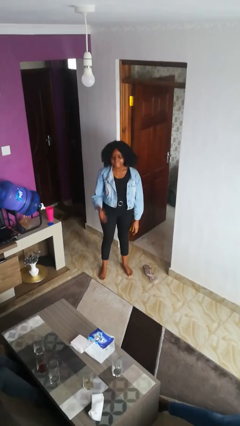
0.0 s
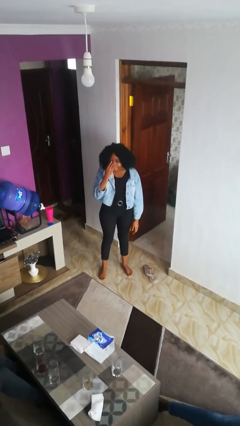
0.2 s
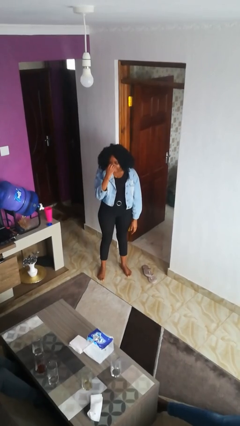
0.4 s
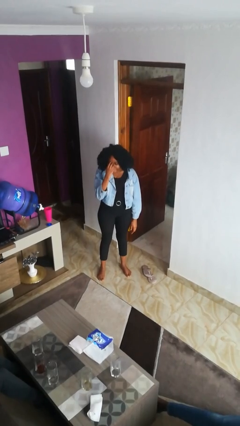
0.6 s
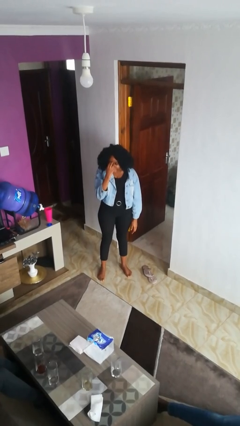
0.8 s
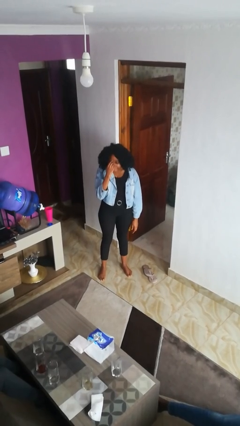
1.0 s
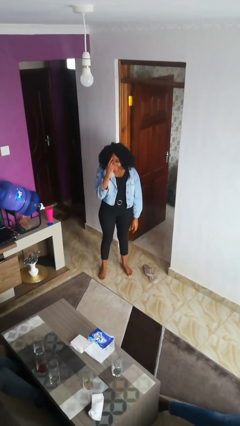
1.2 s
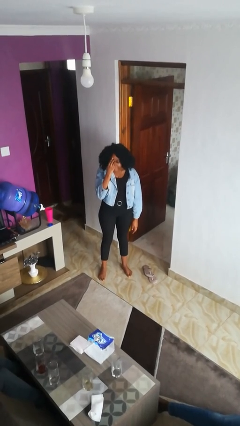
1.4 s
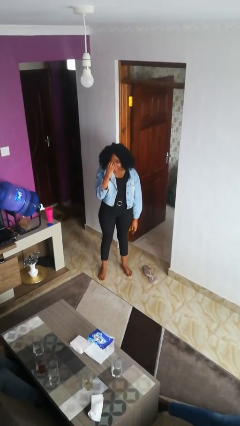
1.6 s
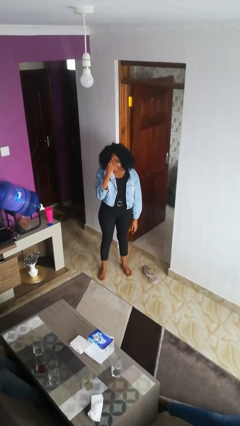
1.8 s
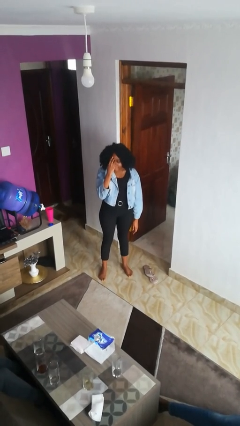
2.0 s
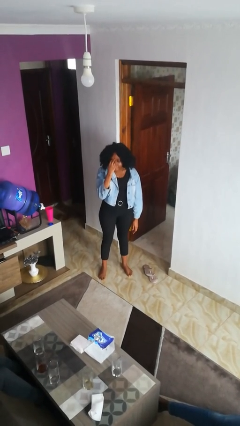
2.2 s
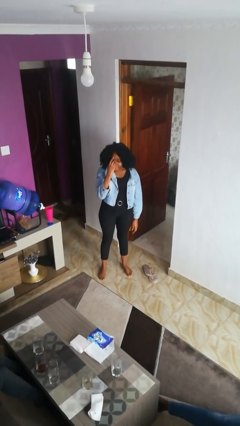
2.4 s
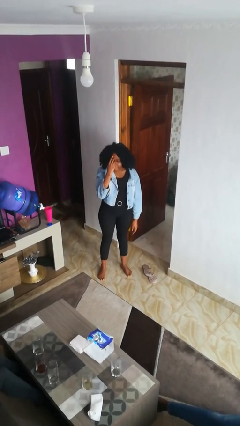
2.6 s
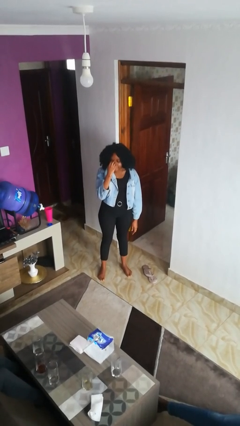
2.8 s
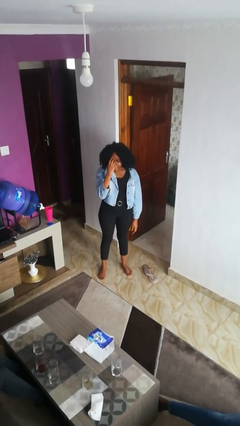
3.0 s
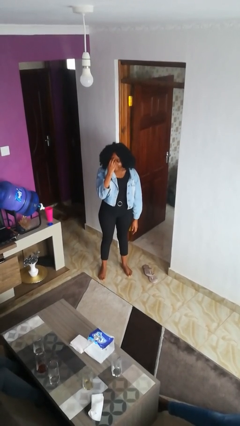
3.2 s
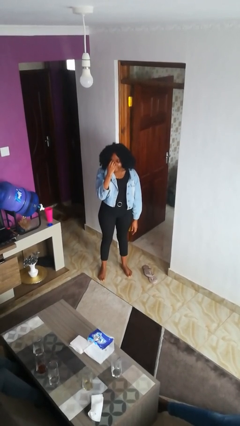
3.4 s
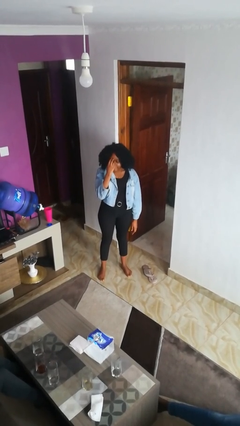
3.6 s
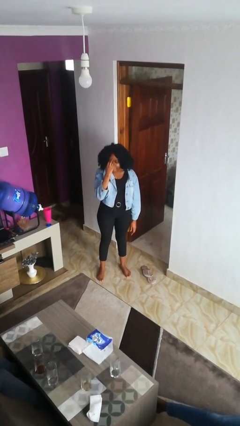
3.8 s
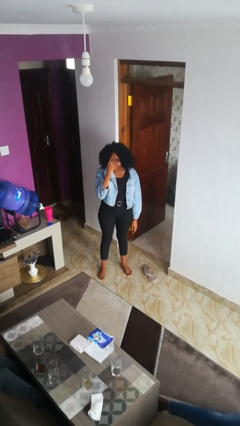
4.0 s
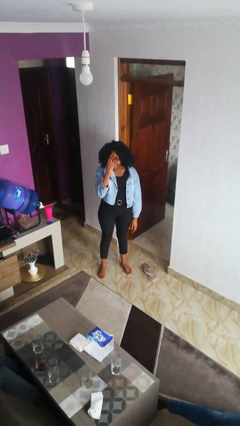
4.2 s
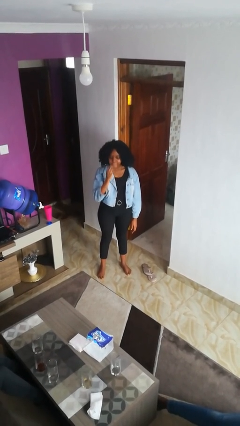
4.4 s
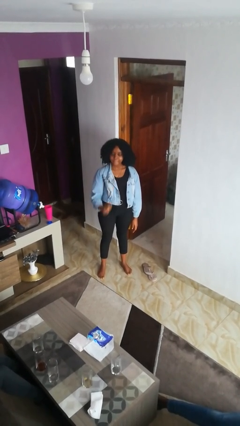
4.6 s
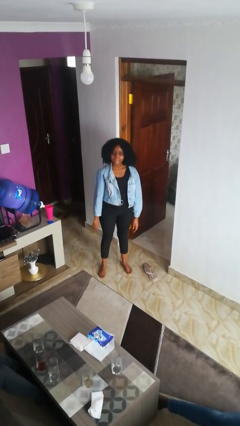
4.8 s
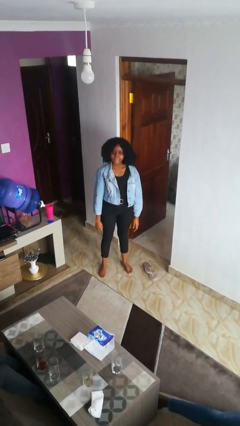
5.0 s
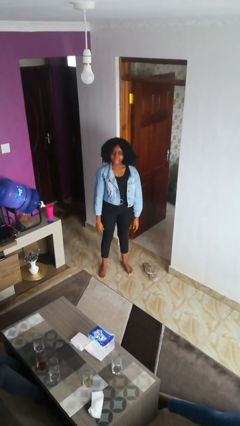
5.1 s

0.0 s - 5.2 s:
person scratches face

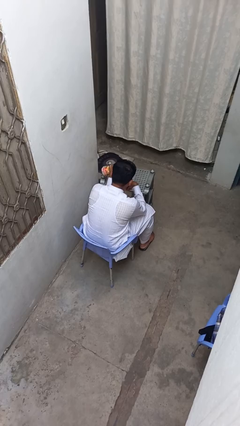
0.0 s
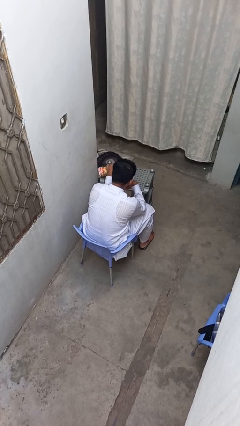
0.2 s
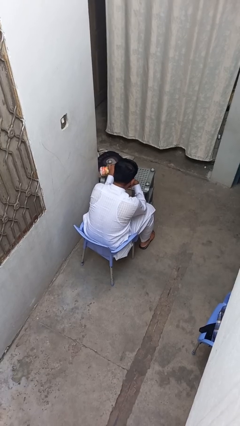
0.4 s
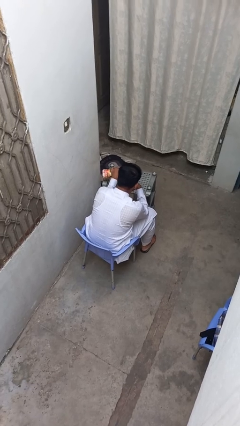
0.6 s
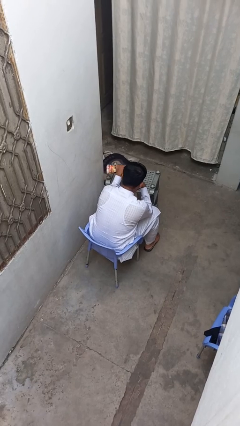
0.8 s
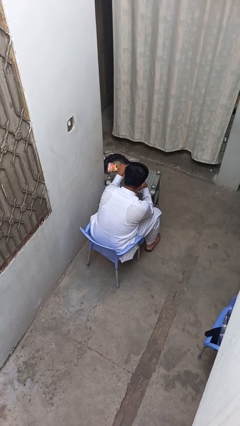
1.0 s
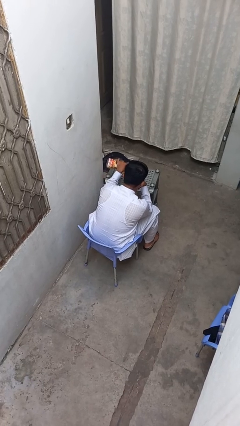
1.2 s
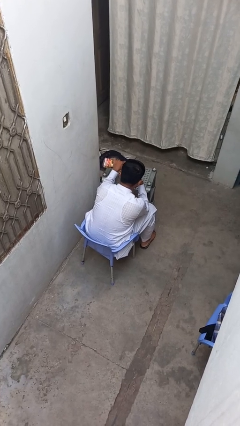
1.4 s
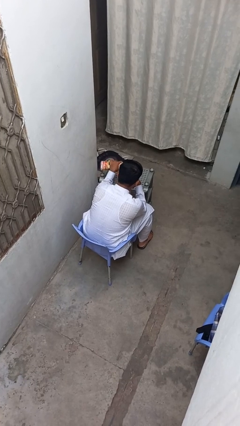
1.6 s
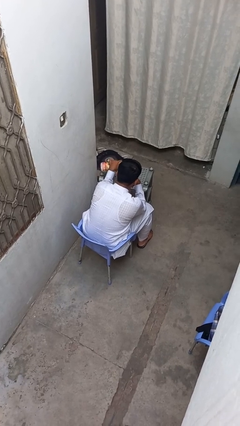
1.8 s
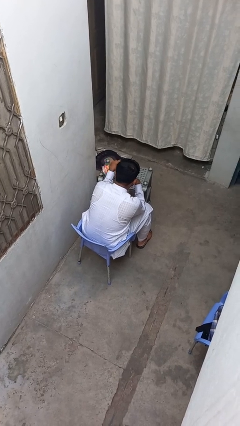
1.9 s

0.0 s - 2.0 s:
person pours liquid into cup

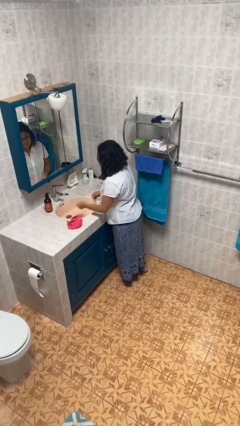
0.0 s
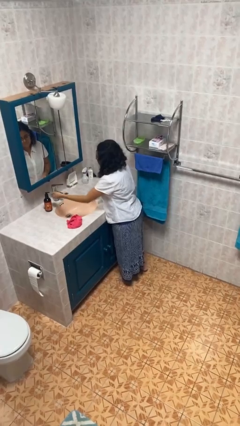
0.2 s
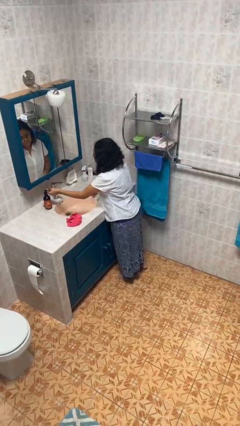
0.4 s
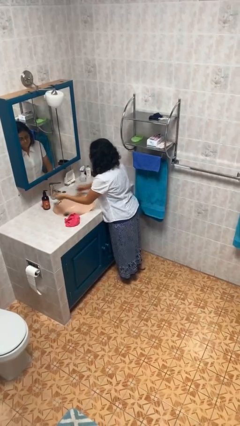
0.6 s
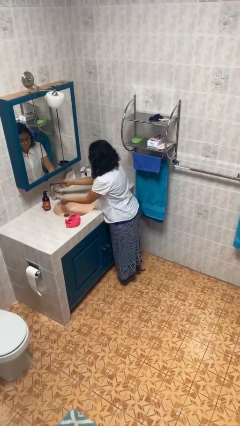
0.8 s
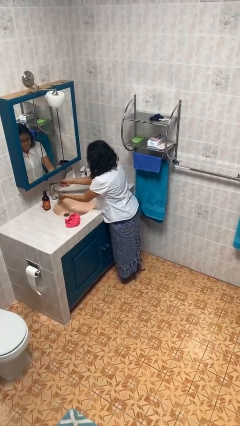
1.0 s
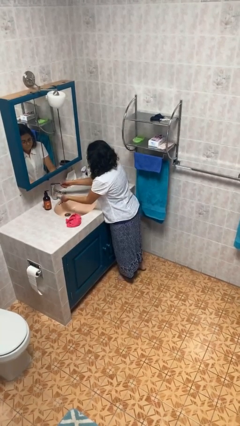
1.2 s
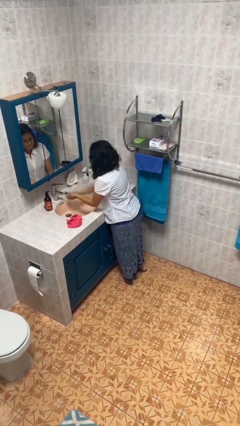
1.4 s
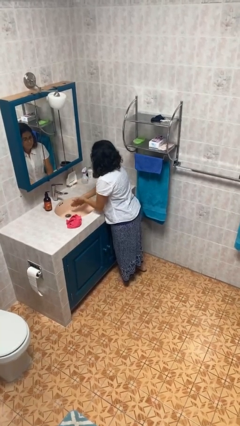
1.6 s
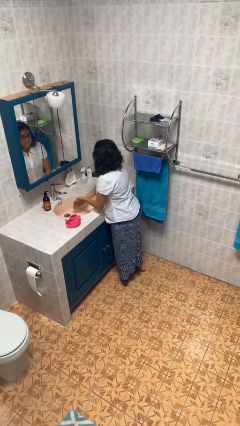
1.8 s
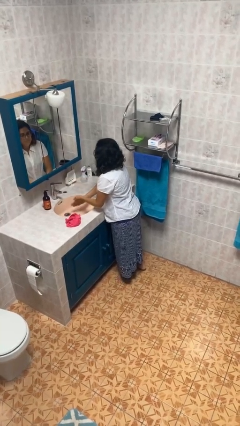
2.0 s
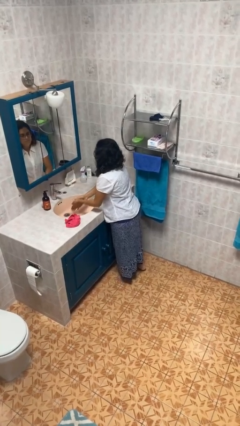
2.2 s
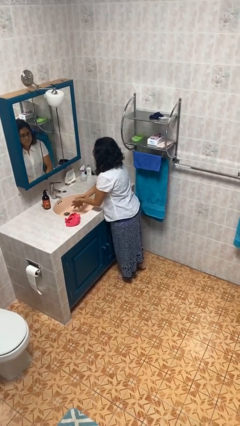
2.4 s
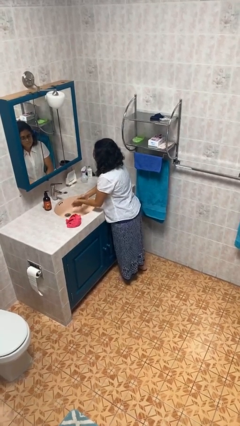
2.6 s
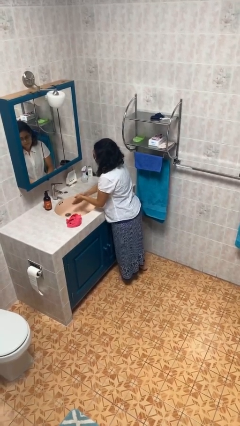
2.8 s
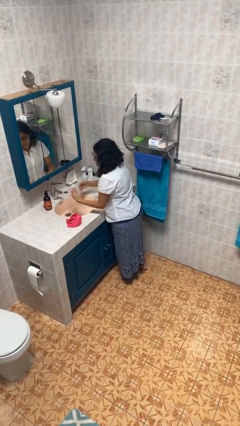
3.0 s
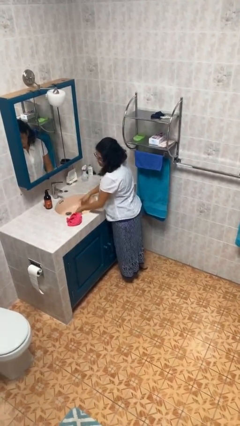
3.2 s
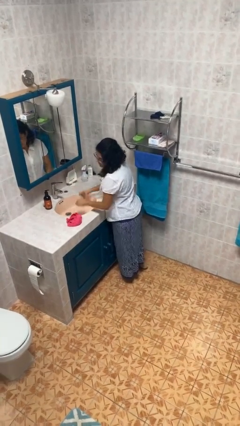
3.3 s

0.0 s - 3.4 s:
person washes hands

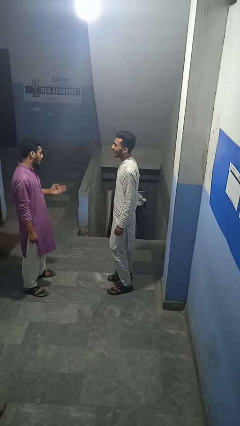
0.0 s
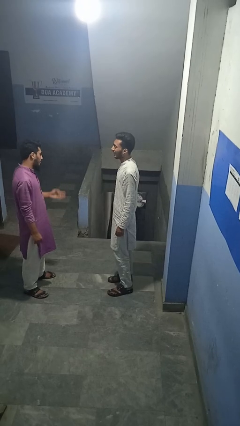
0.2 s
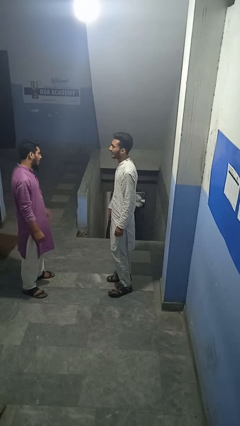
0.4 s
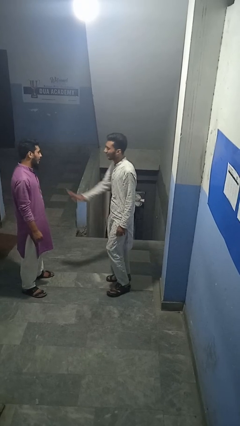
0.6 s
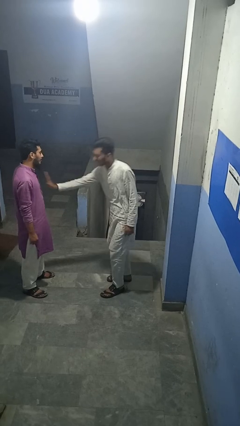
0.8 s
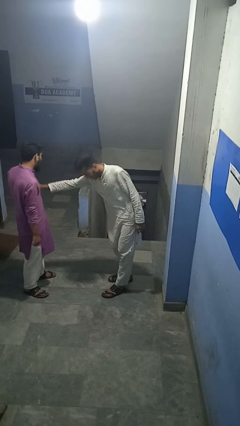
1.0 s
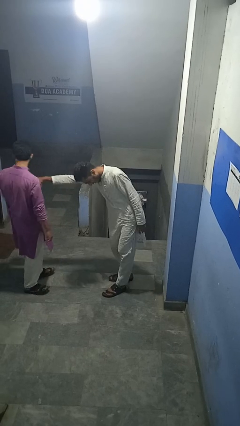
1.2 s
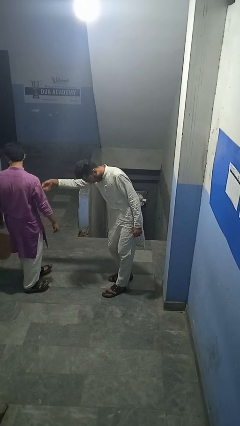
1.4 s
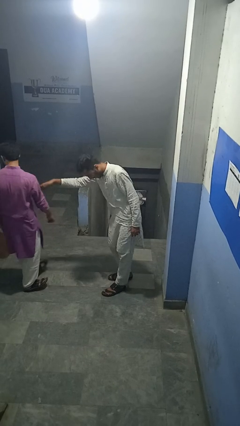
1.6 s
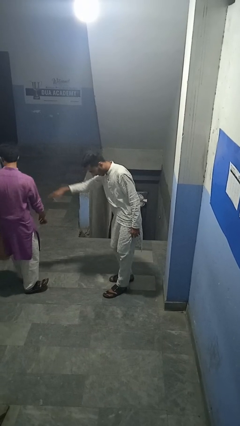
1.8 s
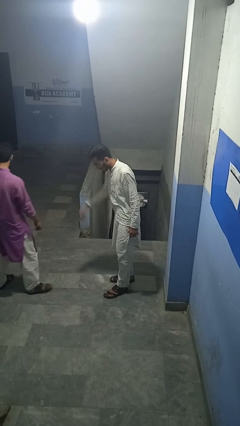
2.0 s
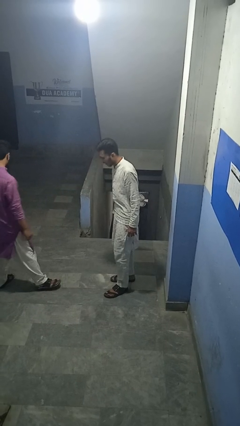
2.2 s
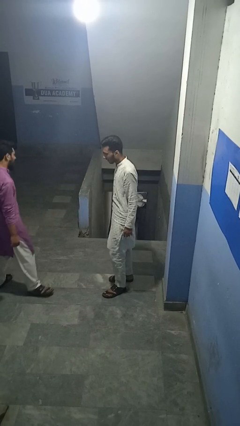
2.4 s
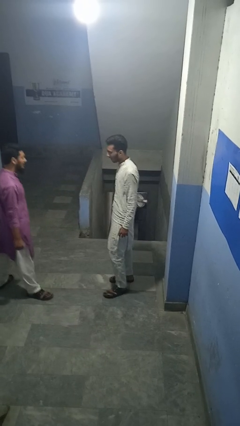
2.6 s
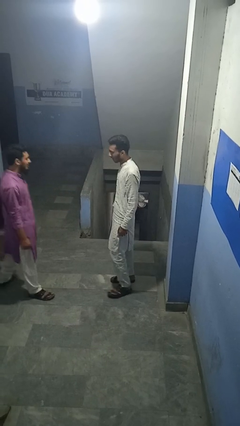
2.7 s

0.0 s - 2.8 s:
person shoves person

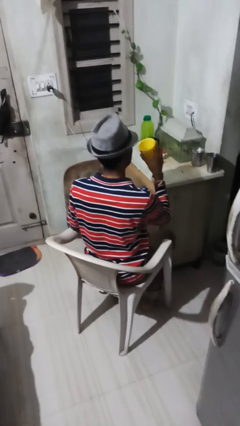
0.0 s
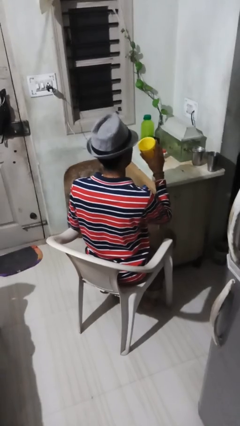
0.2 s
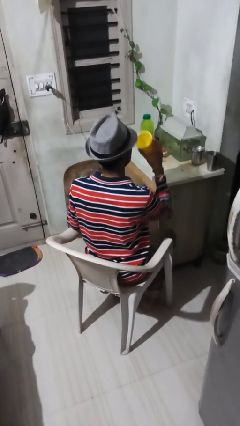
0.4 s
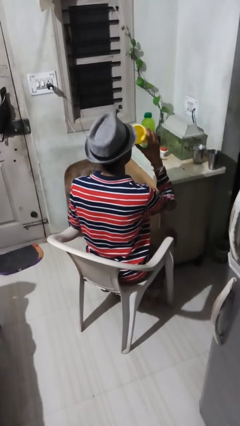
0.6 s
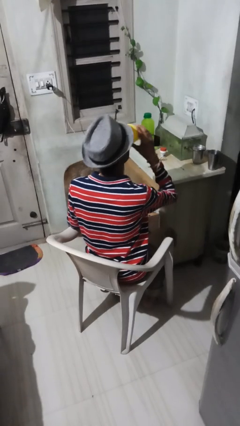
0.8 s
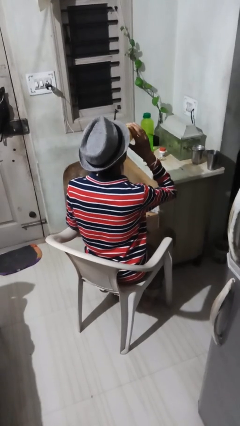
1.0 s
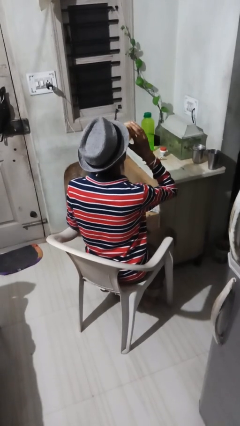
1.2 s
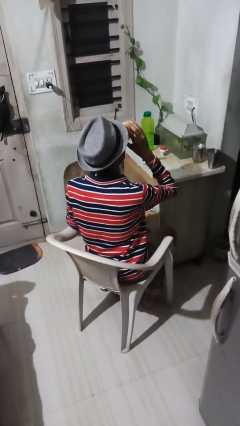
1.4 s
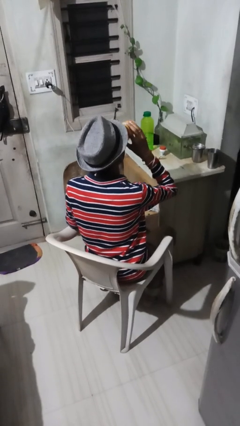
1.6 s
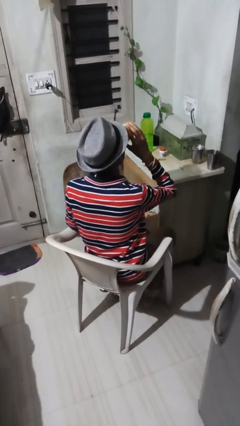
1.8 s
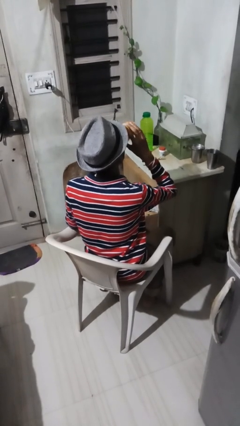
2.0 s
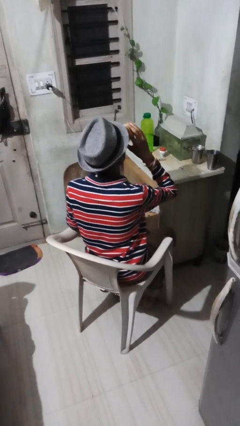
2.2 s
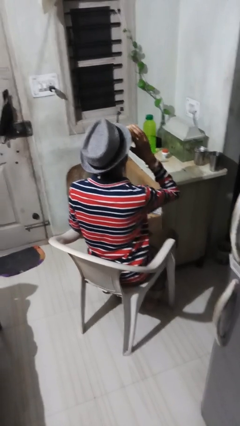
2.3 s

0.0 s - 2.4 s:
person drinks from mug

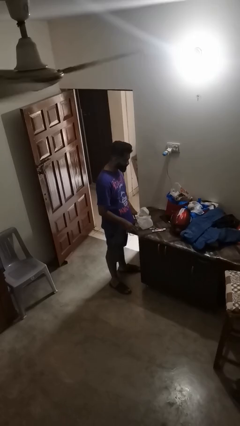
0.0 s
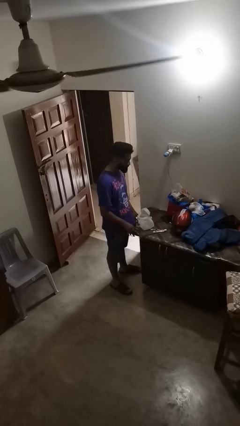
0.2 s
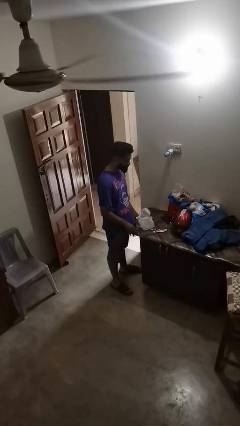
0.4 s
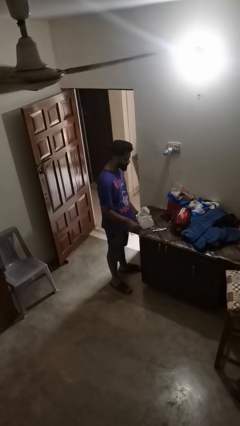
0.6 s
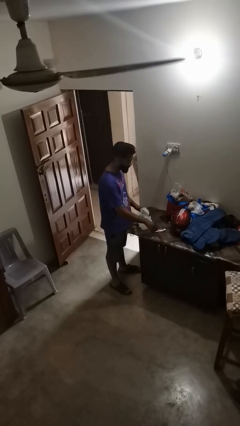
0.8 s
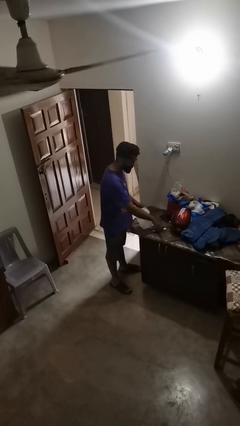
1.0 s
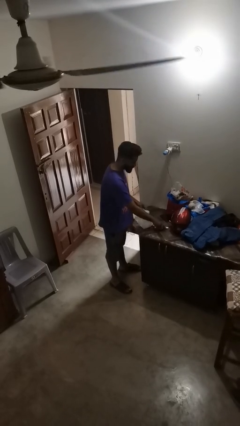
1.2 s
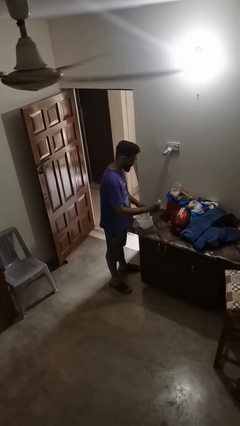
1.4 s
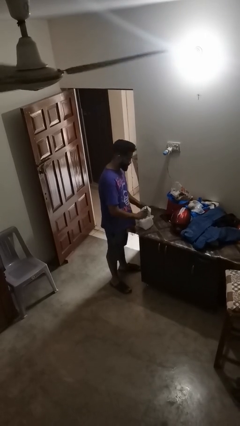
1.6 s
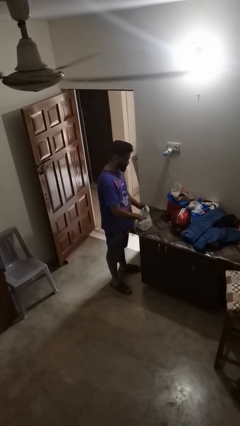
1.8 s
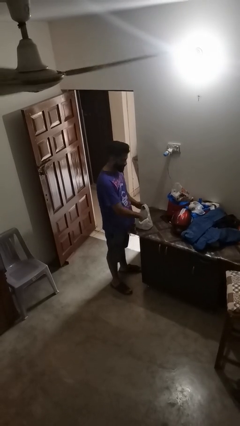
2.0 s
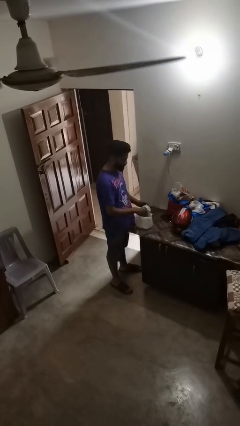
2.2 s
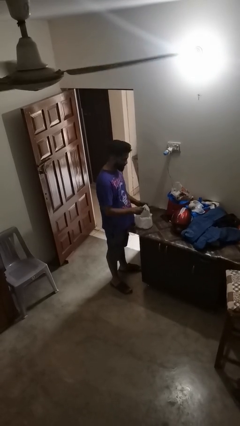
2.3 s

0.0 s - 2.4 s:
person puts object into bag
